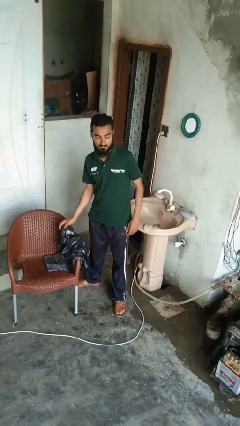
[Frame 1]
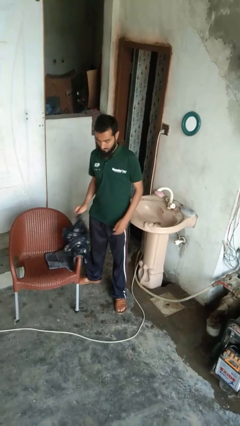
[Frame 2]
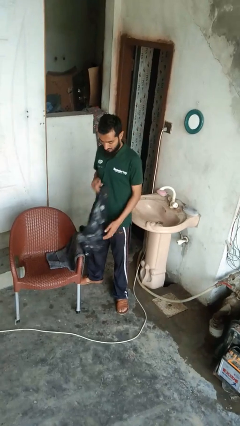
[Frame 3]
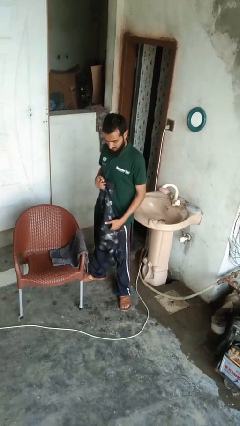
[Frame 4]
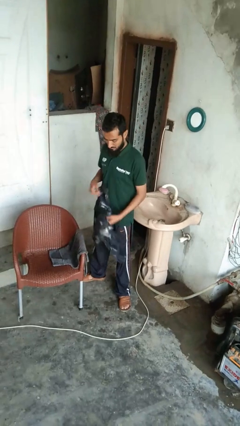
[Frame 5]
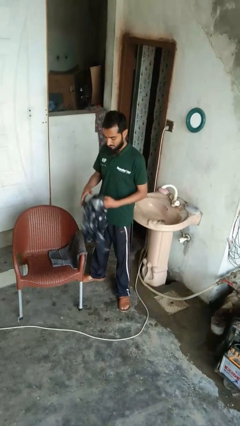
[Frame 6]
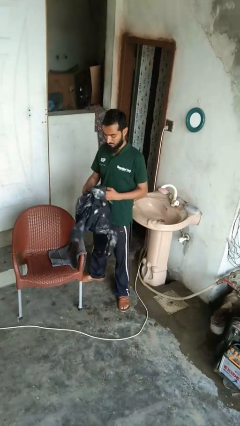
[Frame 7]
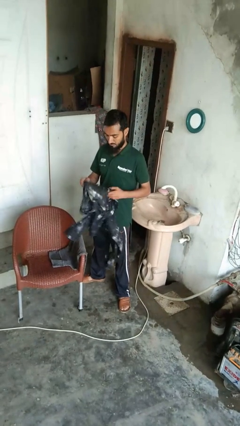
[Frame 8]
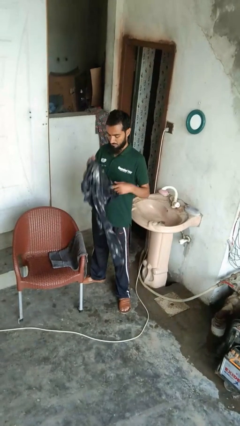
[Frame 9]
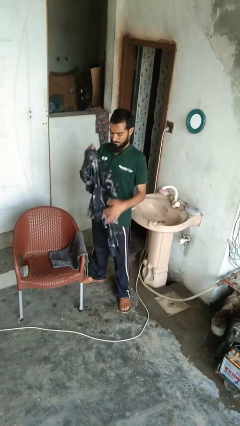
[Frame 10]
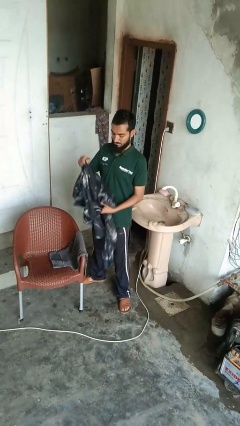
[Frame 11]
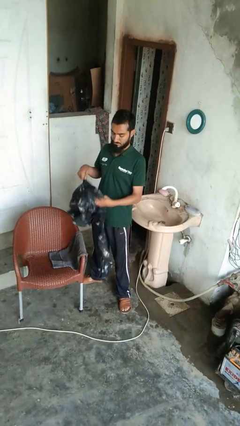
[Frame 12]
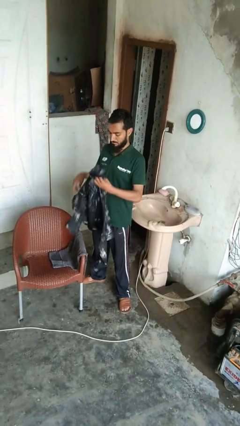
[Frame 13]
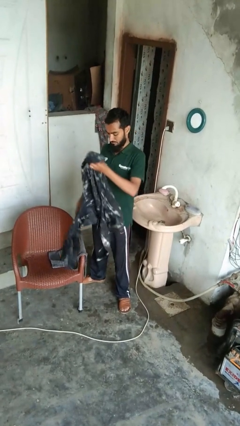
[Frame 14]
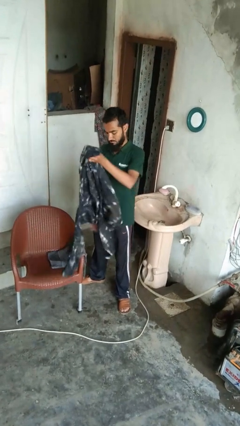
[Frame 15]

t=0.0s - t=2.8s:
person folds shirt

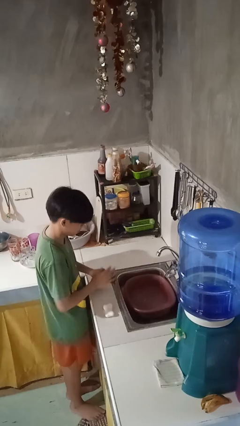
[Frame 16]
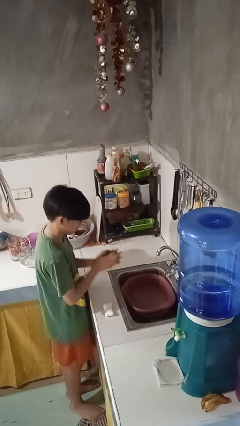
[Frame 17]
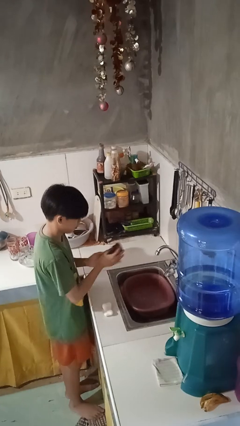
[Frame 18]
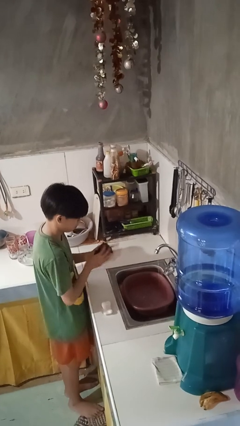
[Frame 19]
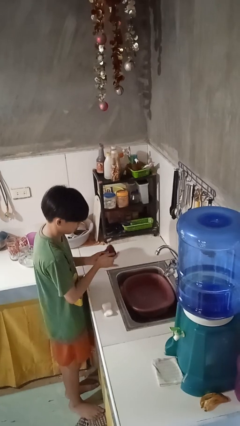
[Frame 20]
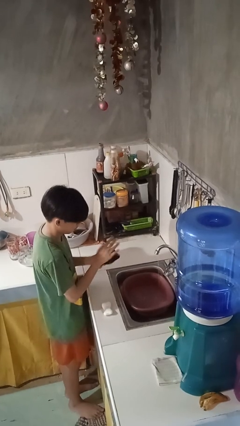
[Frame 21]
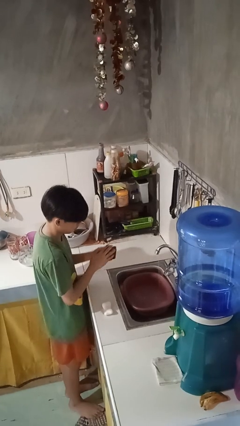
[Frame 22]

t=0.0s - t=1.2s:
person dries hands with towel

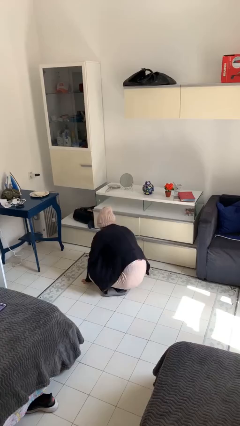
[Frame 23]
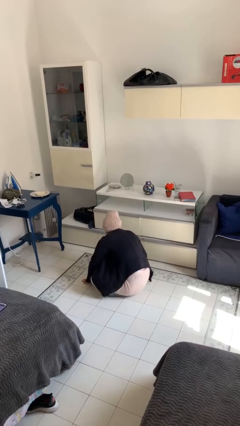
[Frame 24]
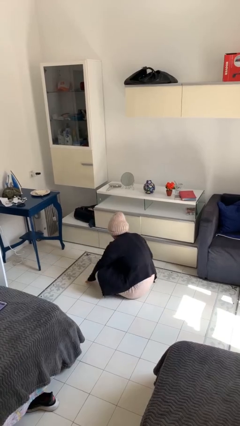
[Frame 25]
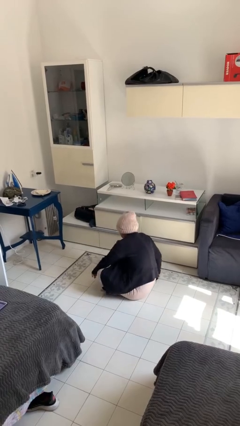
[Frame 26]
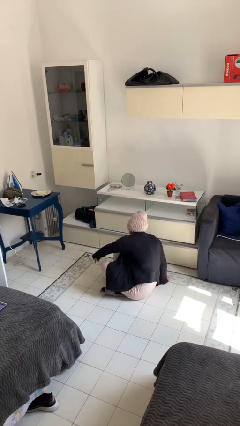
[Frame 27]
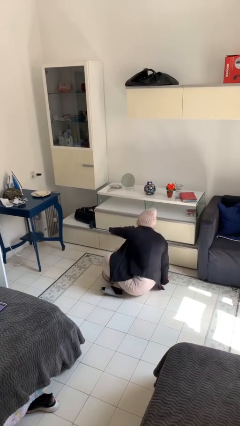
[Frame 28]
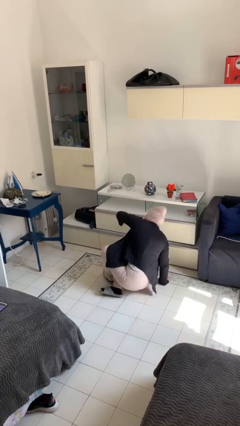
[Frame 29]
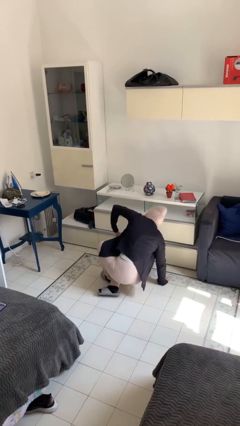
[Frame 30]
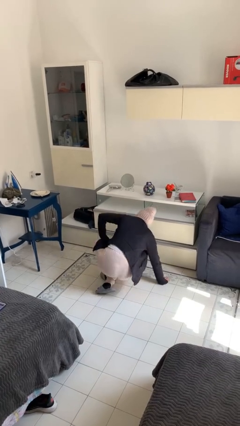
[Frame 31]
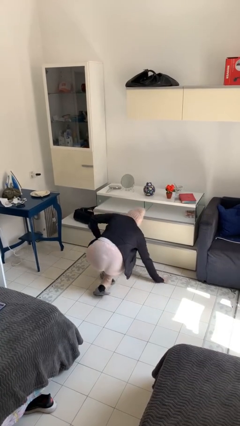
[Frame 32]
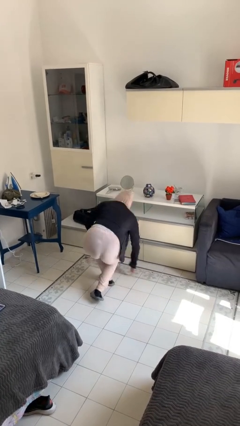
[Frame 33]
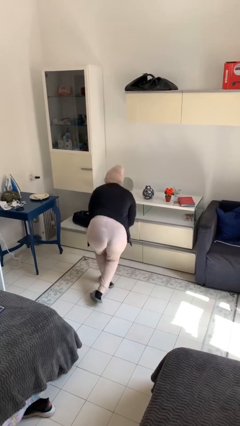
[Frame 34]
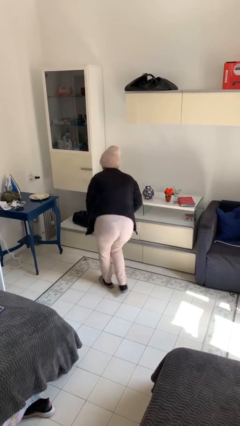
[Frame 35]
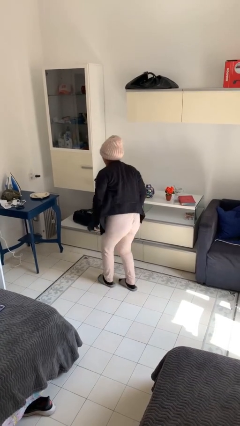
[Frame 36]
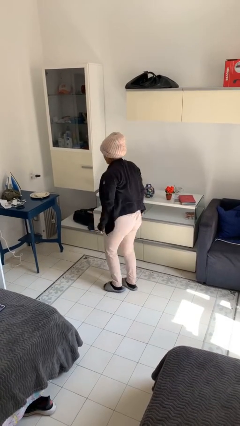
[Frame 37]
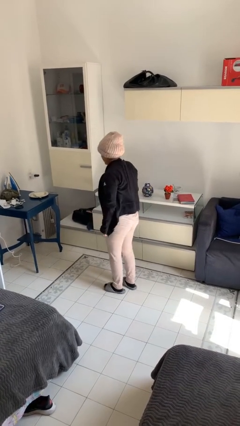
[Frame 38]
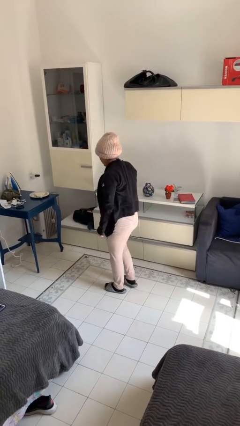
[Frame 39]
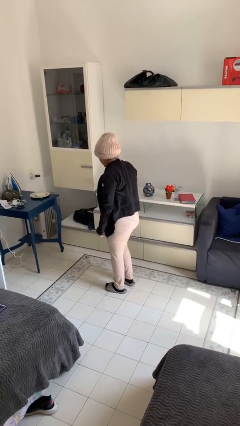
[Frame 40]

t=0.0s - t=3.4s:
person stands up from floor

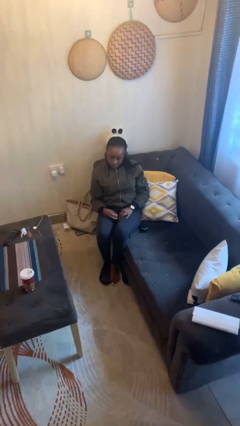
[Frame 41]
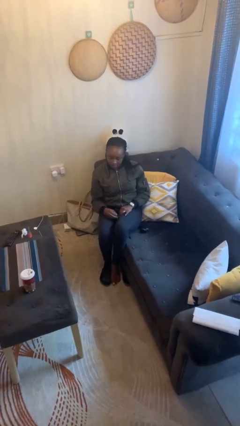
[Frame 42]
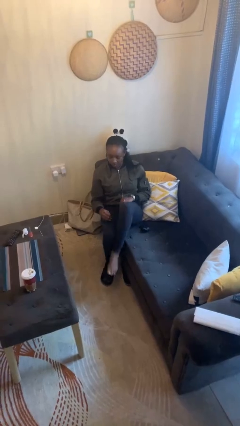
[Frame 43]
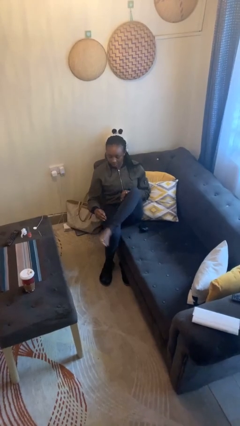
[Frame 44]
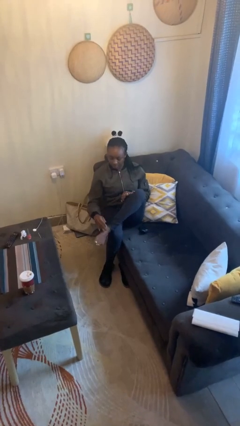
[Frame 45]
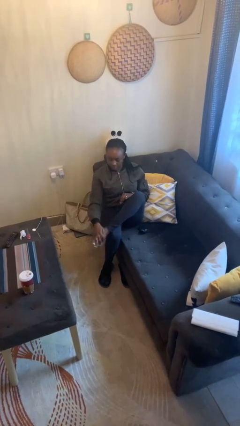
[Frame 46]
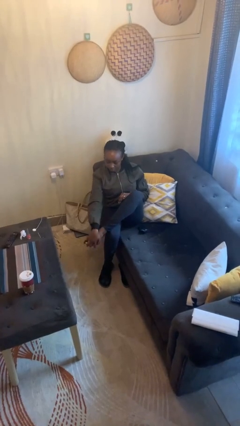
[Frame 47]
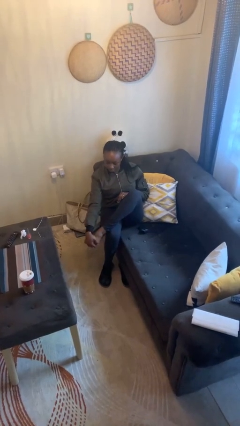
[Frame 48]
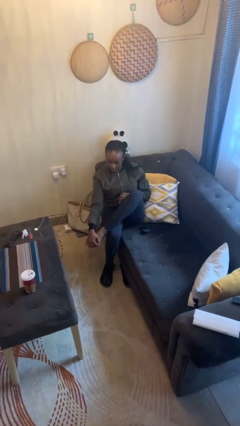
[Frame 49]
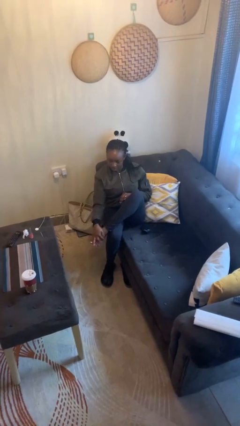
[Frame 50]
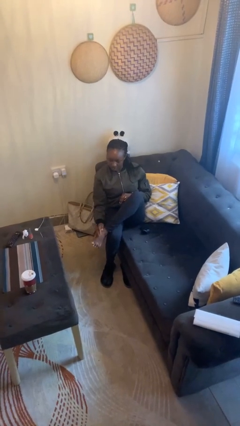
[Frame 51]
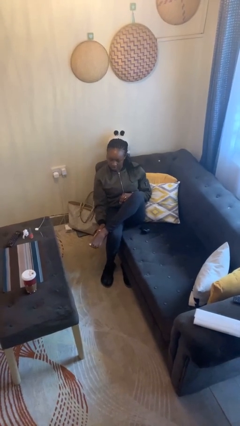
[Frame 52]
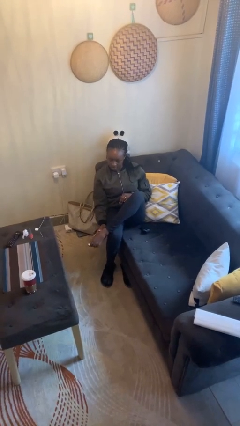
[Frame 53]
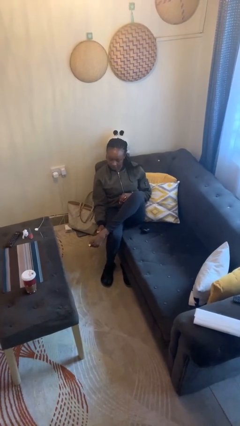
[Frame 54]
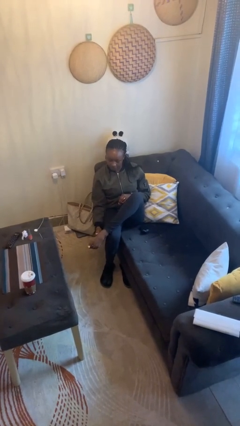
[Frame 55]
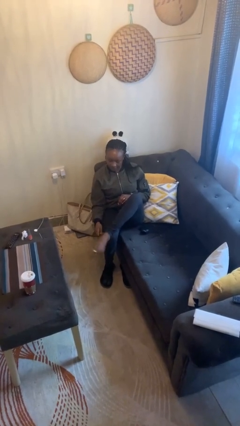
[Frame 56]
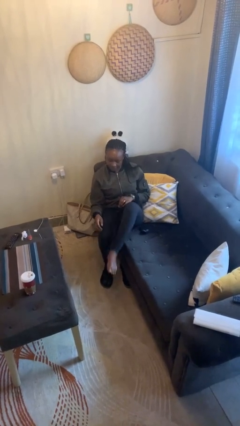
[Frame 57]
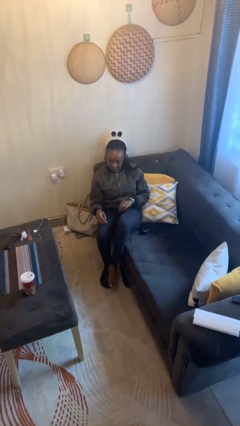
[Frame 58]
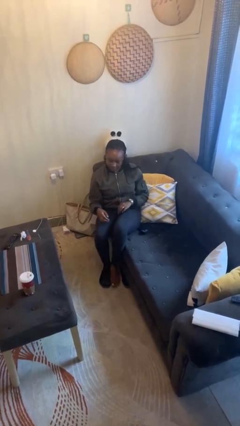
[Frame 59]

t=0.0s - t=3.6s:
person rubs foot

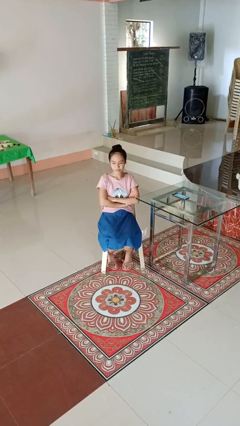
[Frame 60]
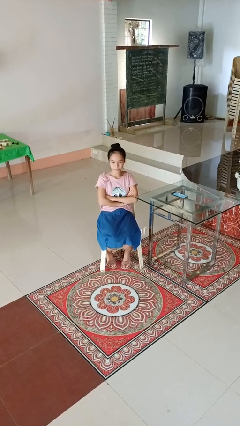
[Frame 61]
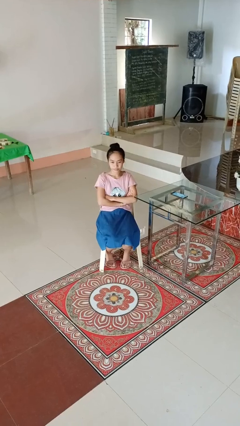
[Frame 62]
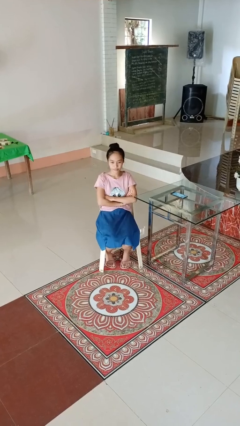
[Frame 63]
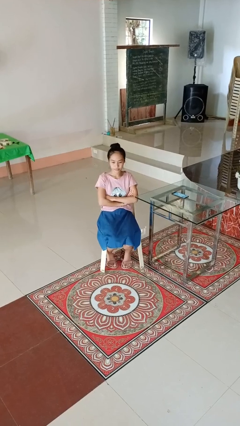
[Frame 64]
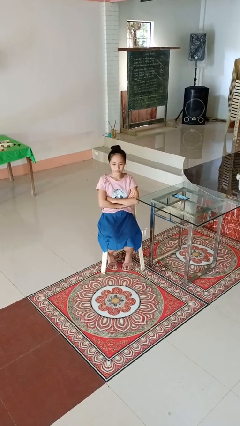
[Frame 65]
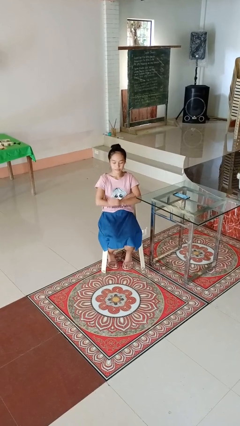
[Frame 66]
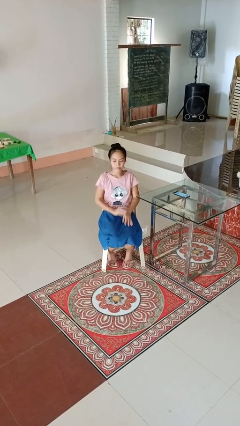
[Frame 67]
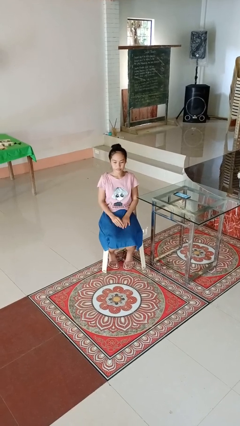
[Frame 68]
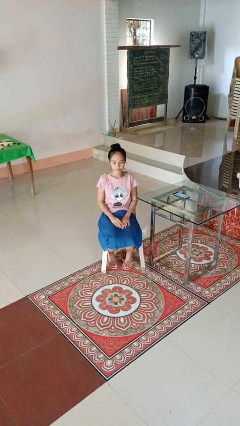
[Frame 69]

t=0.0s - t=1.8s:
person crosses arms

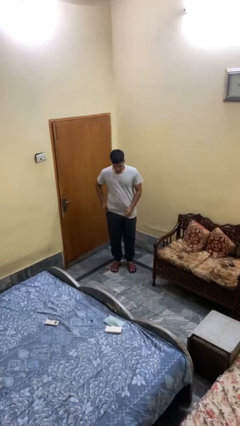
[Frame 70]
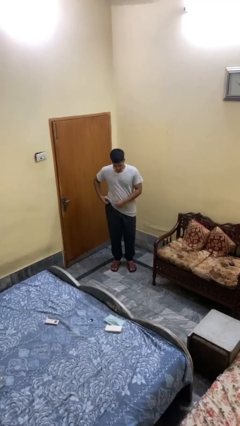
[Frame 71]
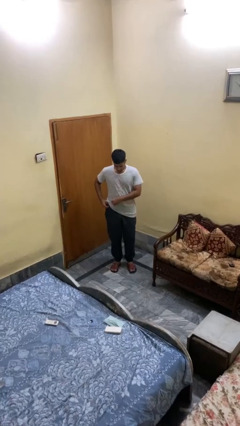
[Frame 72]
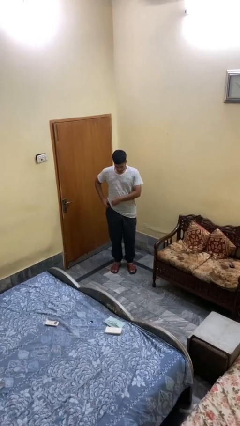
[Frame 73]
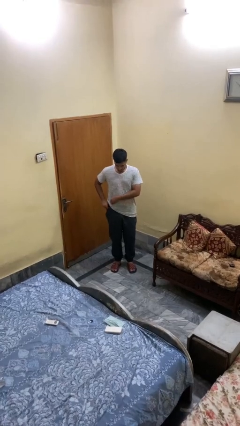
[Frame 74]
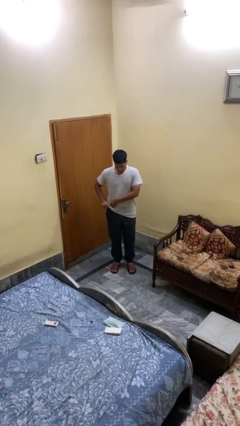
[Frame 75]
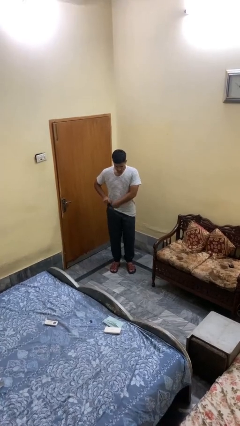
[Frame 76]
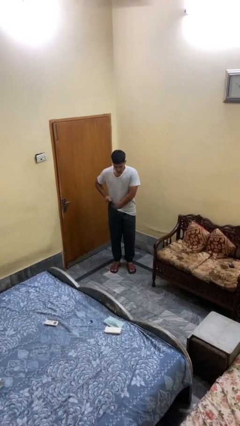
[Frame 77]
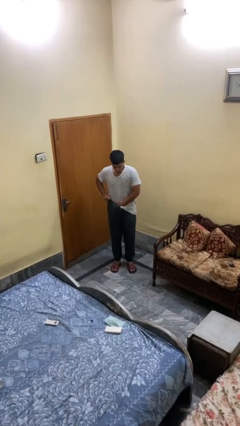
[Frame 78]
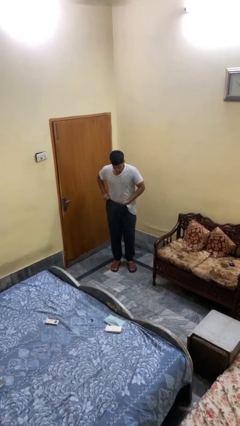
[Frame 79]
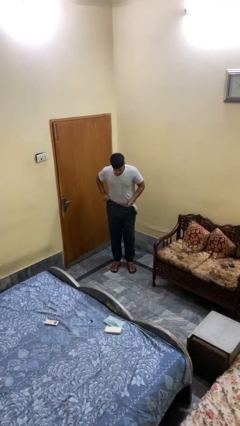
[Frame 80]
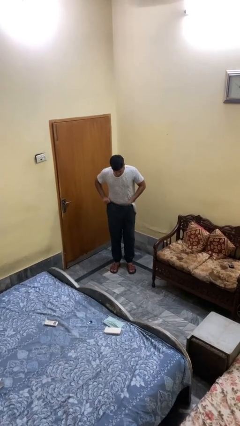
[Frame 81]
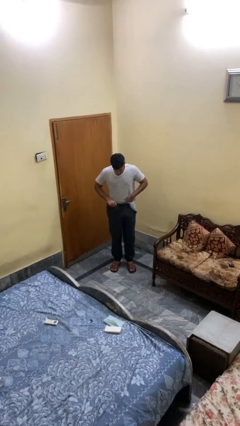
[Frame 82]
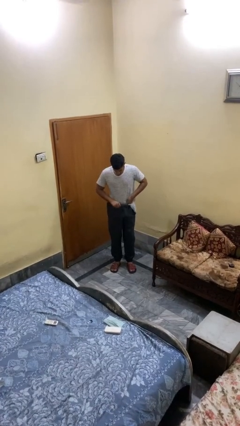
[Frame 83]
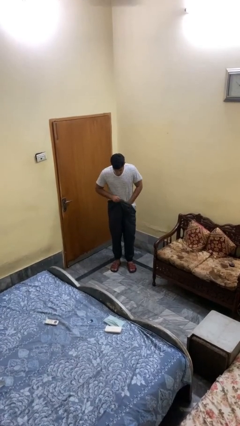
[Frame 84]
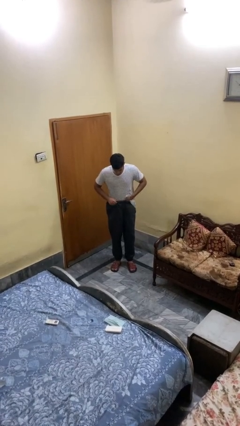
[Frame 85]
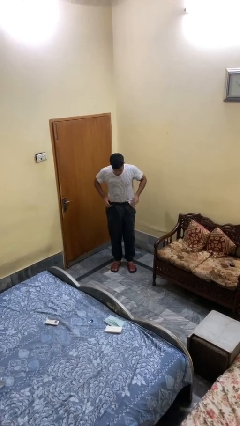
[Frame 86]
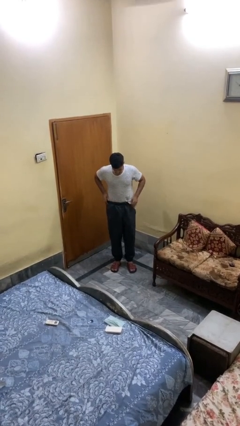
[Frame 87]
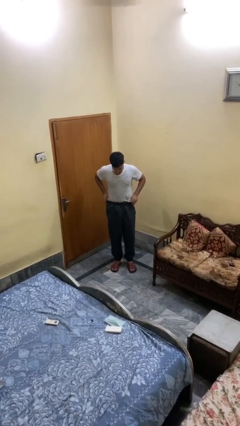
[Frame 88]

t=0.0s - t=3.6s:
person tucks in shirt

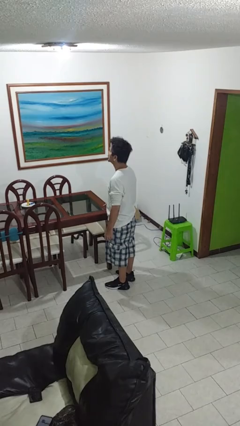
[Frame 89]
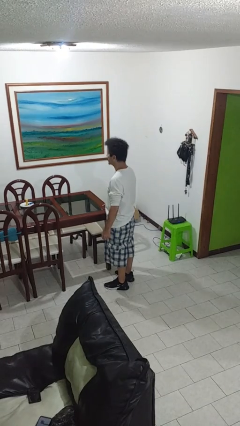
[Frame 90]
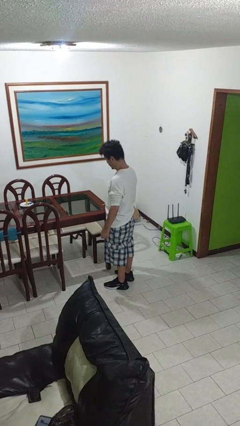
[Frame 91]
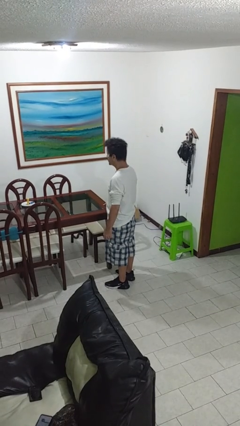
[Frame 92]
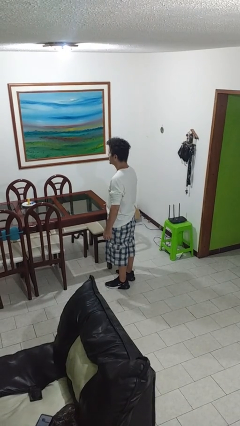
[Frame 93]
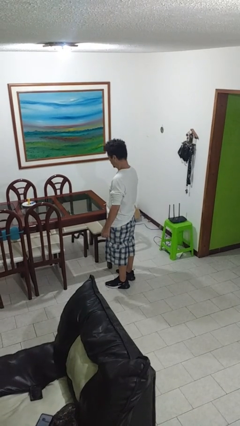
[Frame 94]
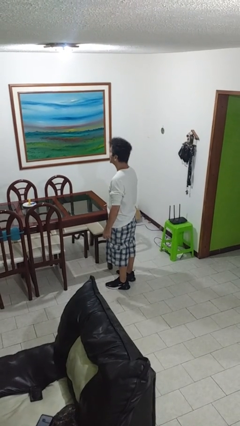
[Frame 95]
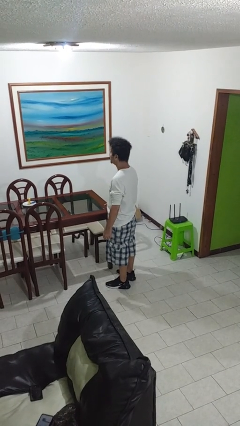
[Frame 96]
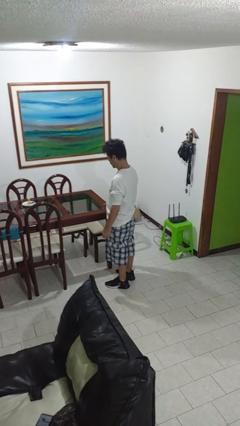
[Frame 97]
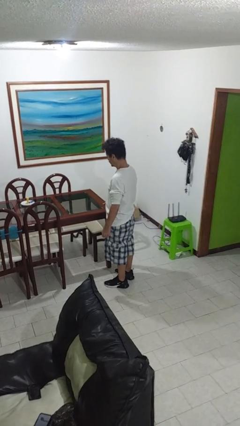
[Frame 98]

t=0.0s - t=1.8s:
person nods head
